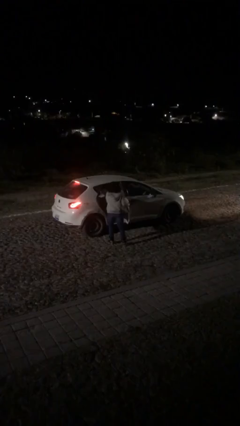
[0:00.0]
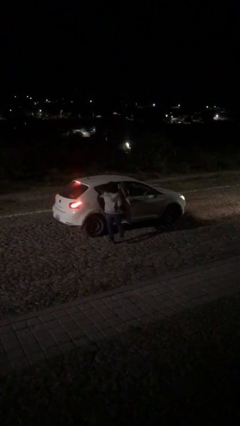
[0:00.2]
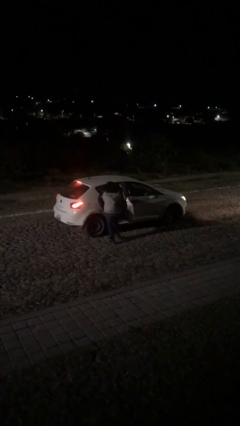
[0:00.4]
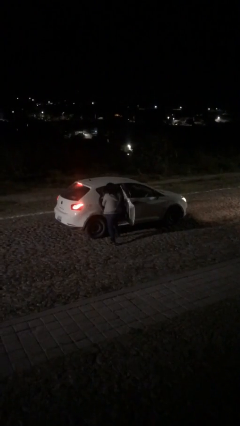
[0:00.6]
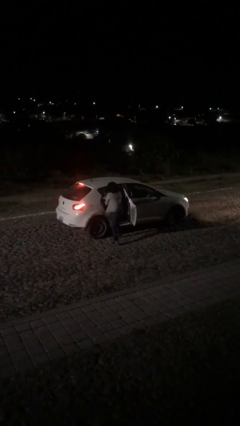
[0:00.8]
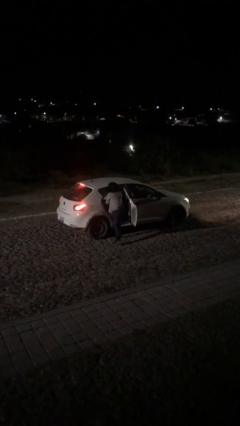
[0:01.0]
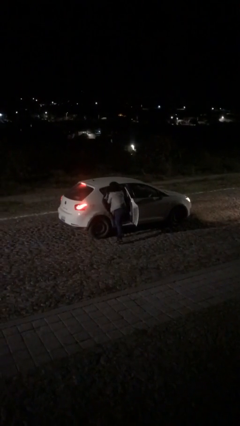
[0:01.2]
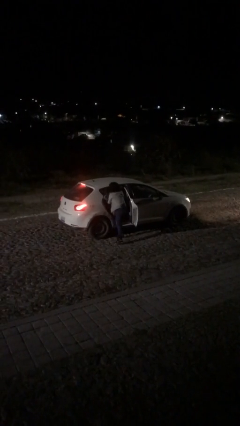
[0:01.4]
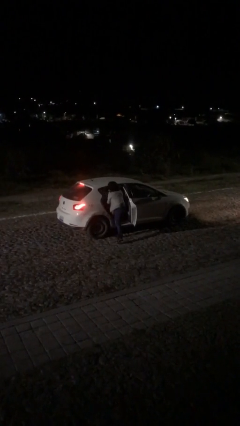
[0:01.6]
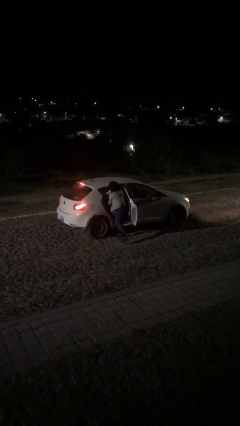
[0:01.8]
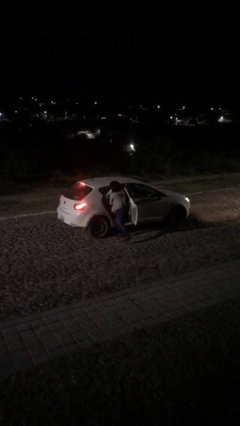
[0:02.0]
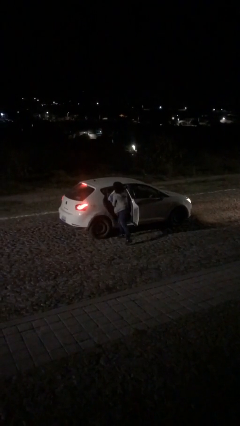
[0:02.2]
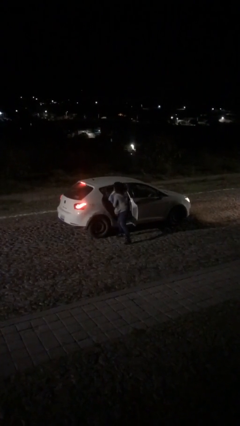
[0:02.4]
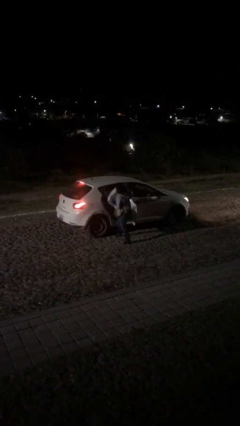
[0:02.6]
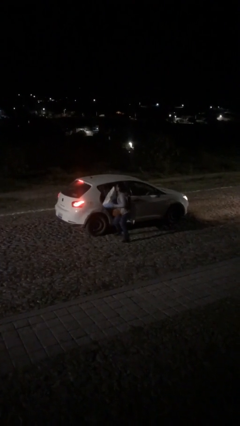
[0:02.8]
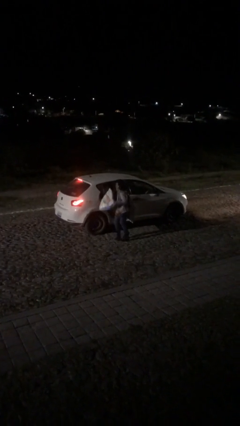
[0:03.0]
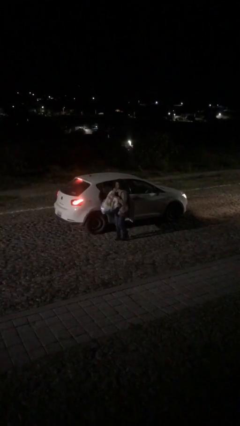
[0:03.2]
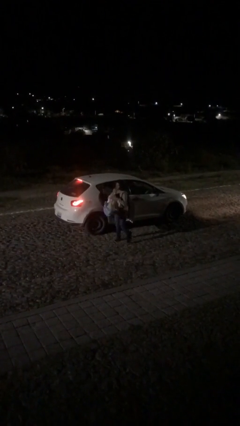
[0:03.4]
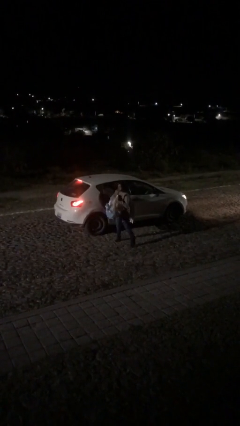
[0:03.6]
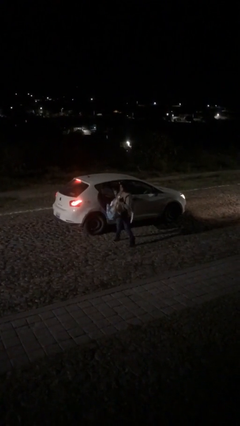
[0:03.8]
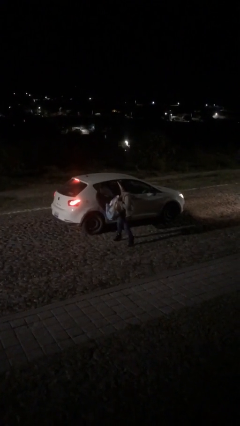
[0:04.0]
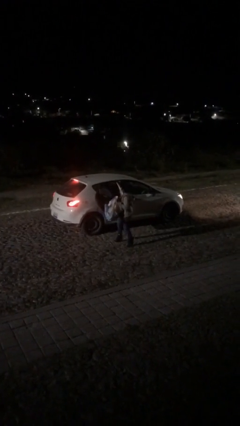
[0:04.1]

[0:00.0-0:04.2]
person unloads car

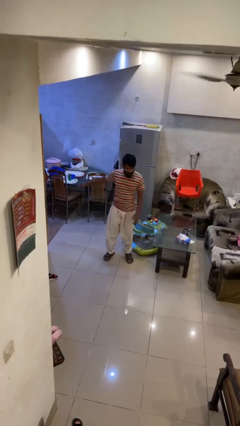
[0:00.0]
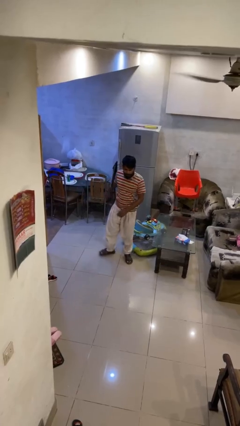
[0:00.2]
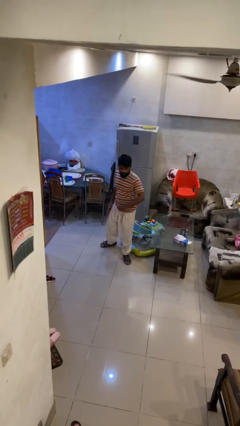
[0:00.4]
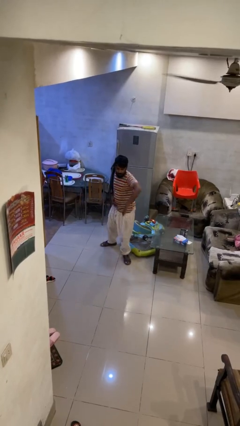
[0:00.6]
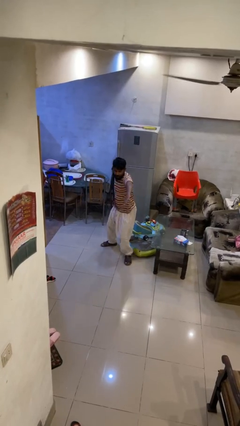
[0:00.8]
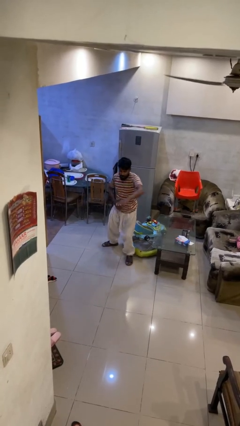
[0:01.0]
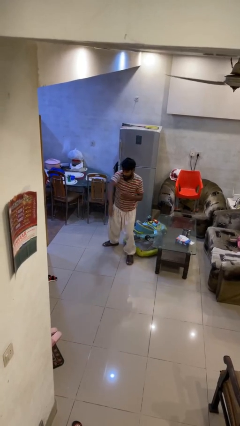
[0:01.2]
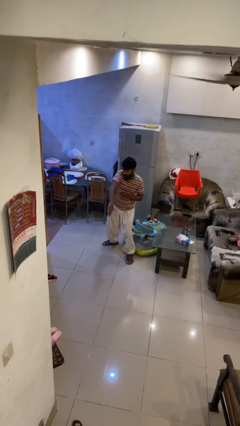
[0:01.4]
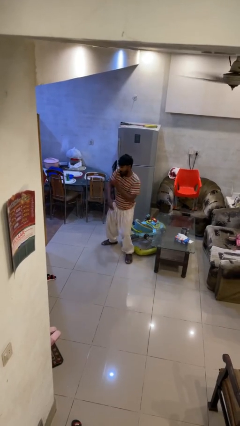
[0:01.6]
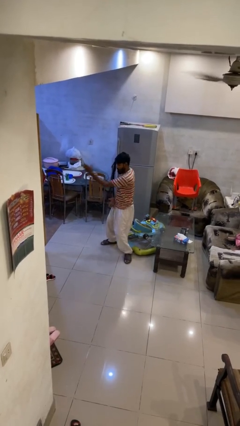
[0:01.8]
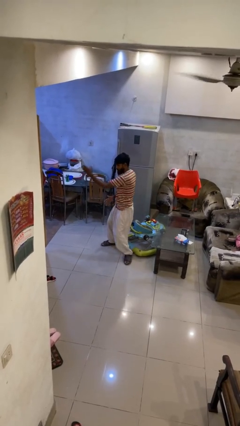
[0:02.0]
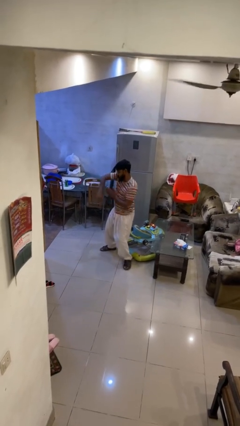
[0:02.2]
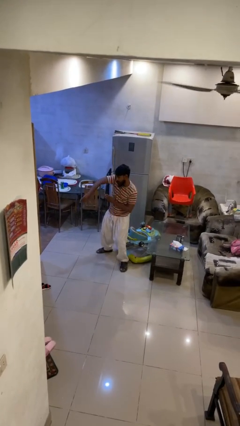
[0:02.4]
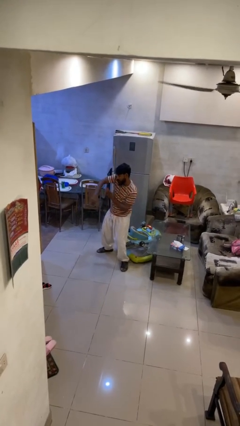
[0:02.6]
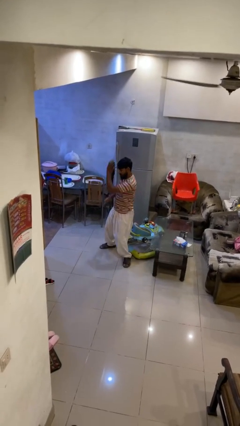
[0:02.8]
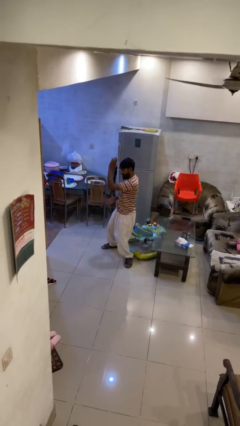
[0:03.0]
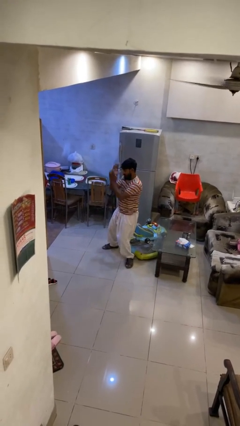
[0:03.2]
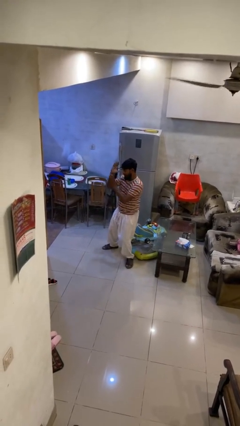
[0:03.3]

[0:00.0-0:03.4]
person karate chop

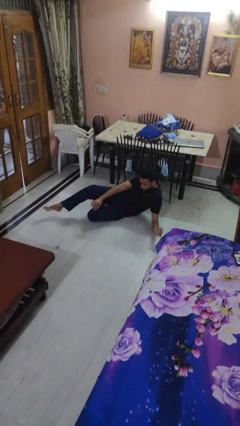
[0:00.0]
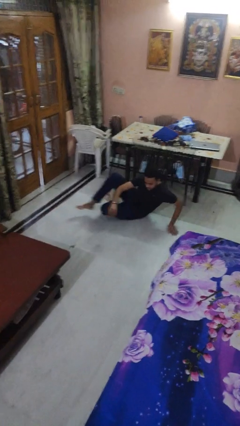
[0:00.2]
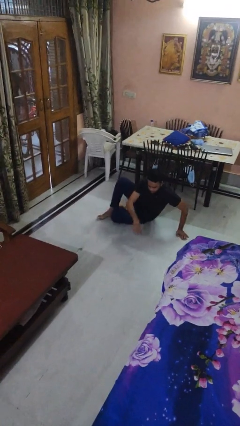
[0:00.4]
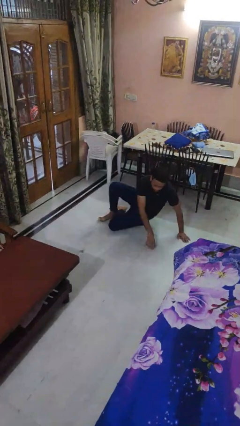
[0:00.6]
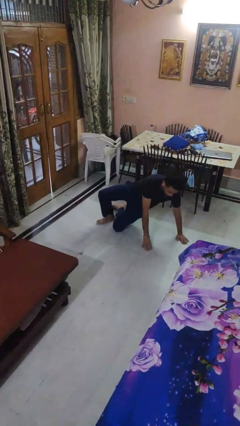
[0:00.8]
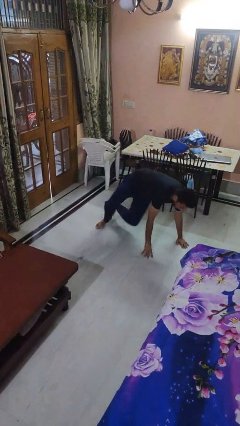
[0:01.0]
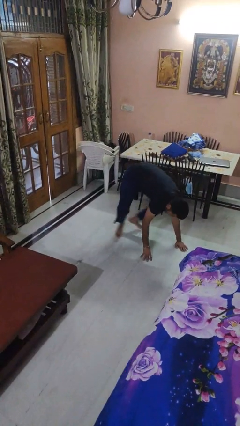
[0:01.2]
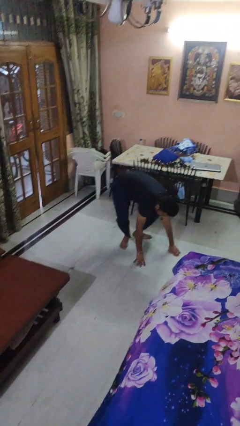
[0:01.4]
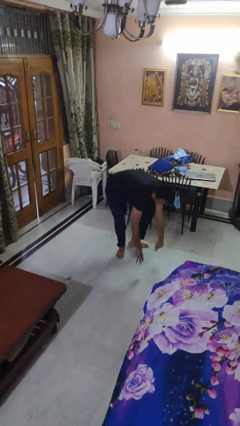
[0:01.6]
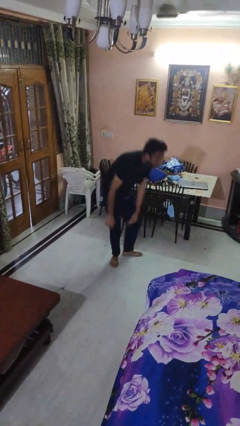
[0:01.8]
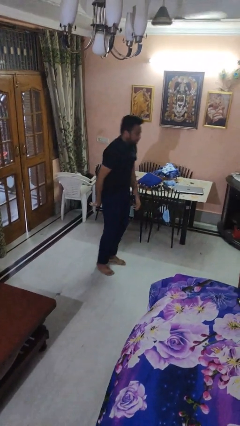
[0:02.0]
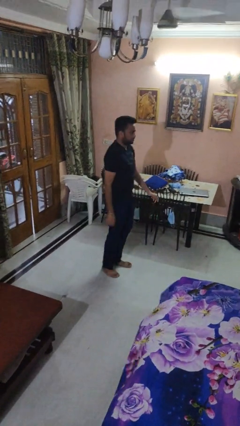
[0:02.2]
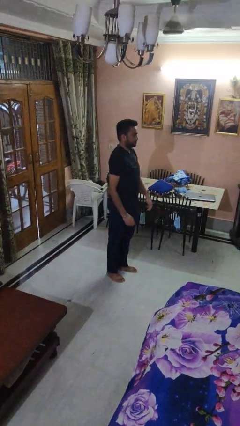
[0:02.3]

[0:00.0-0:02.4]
person stands up from floor

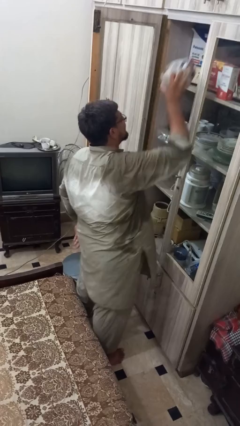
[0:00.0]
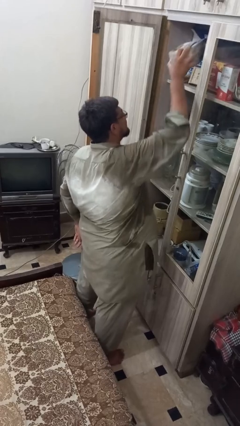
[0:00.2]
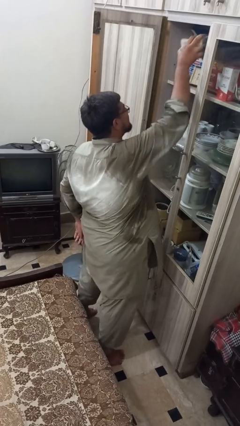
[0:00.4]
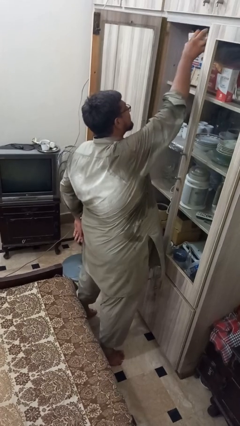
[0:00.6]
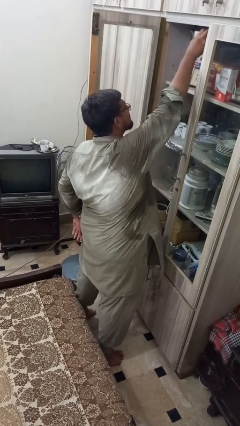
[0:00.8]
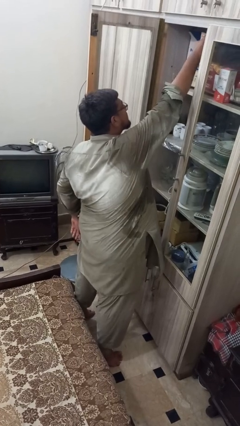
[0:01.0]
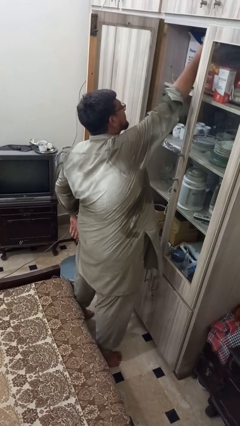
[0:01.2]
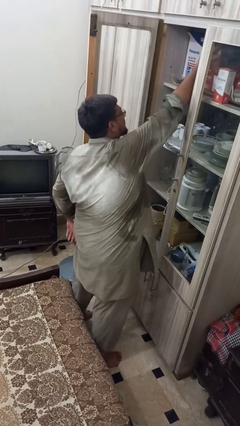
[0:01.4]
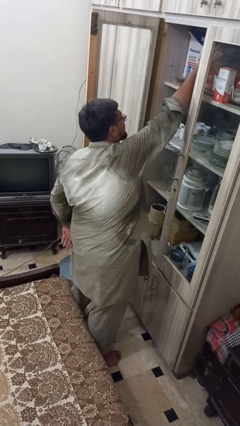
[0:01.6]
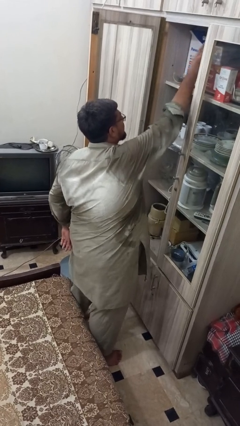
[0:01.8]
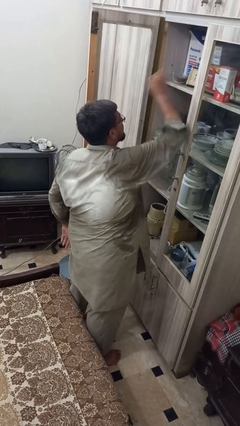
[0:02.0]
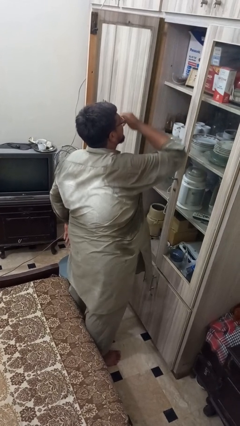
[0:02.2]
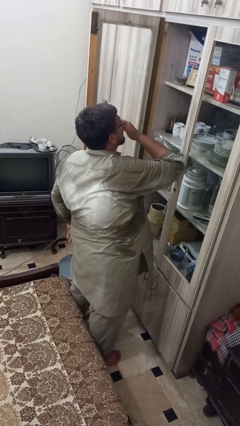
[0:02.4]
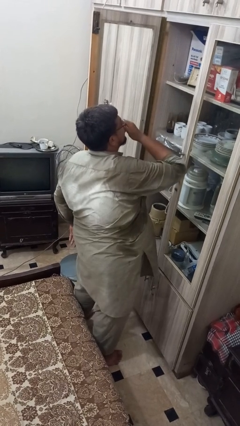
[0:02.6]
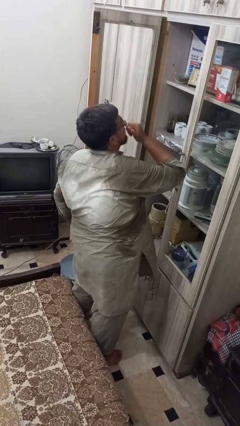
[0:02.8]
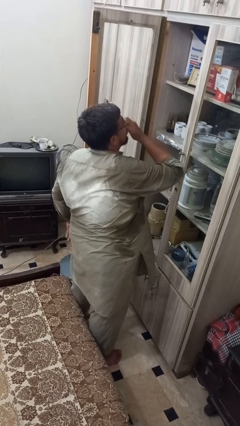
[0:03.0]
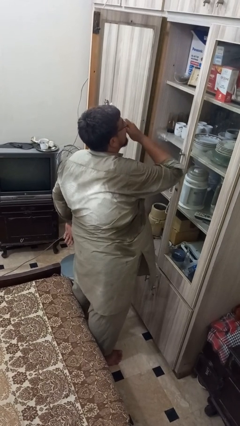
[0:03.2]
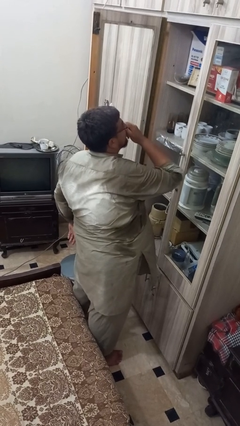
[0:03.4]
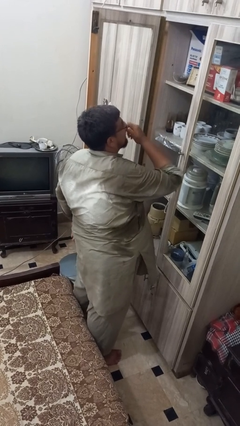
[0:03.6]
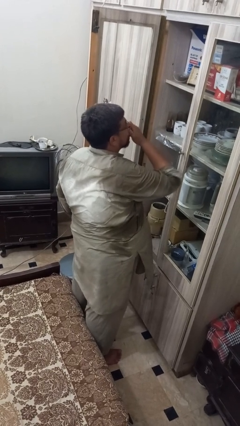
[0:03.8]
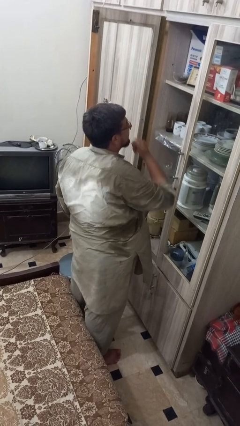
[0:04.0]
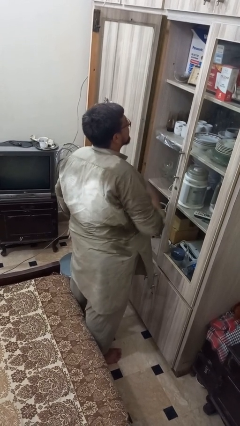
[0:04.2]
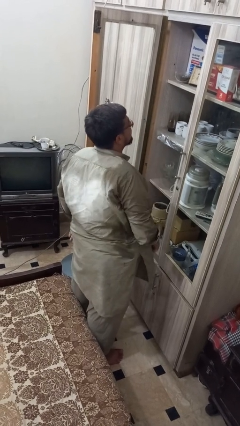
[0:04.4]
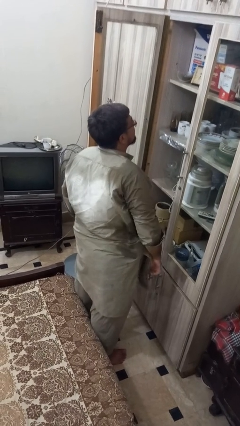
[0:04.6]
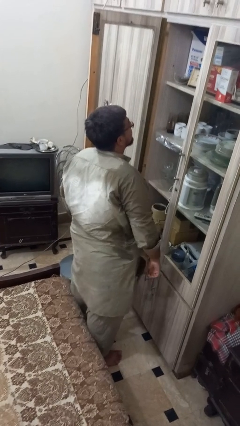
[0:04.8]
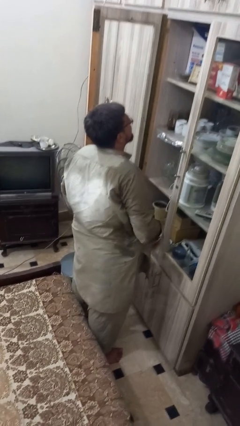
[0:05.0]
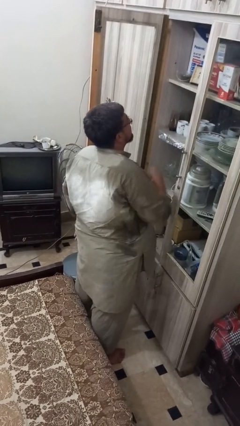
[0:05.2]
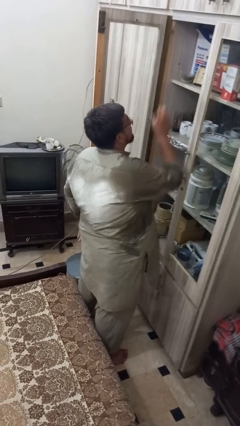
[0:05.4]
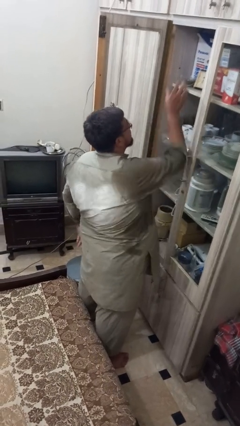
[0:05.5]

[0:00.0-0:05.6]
person puts down object on shelf

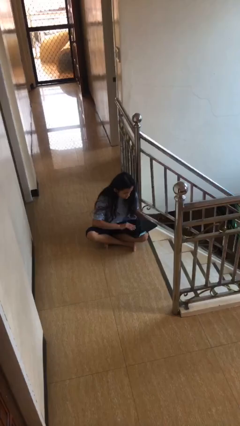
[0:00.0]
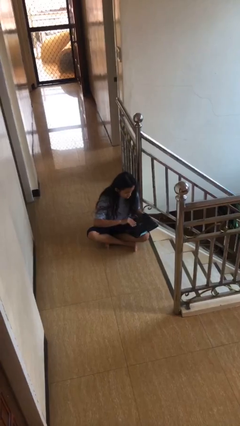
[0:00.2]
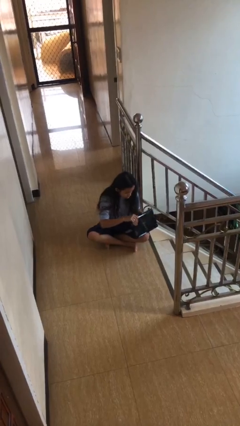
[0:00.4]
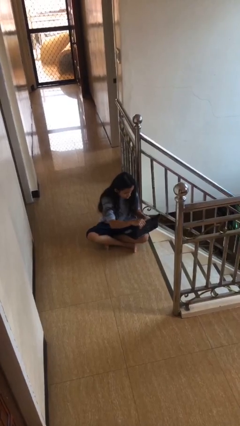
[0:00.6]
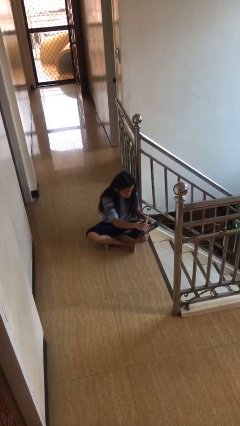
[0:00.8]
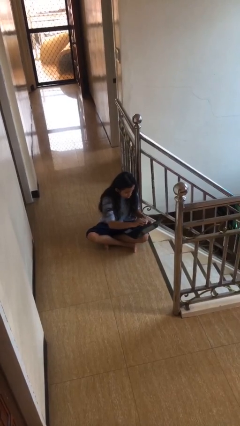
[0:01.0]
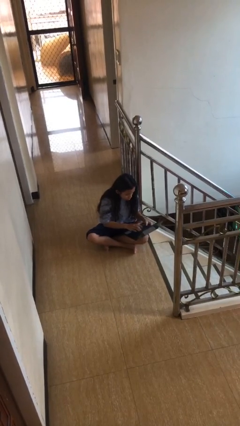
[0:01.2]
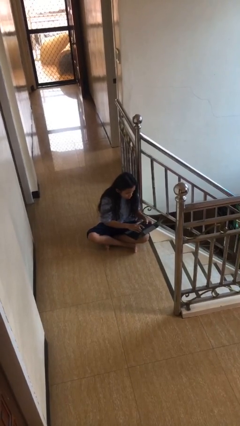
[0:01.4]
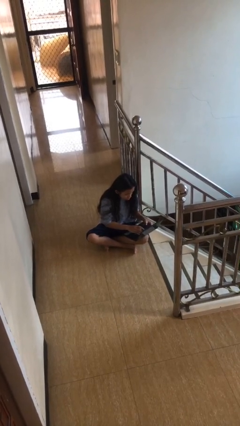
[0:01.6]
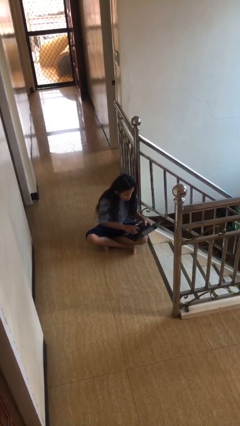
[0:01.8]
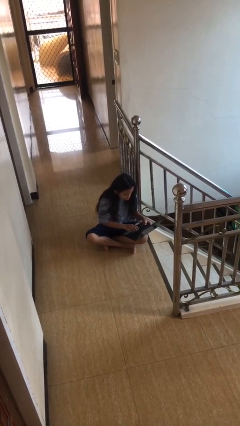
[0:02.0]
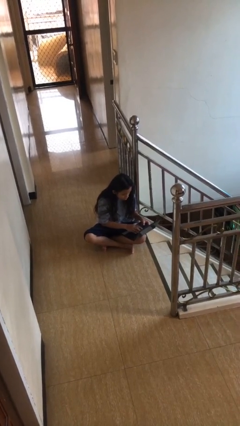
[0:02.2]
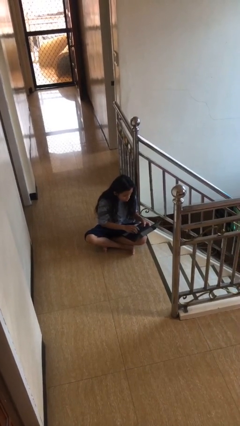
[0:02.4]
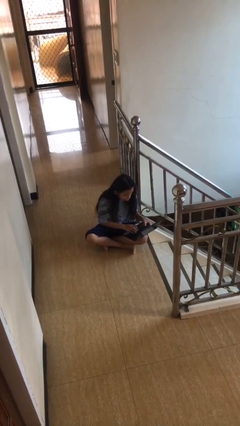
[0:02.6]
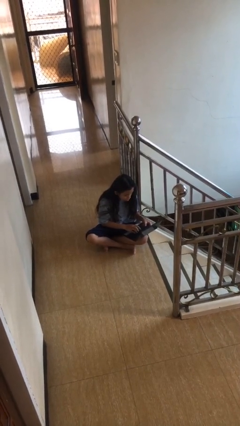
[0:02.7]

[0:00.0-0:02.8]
person interacts with laptop
